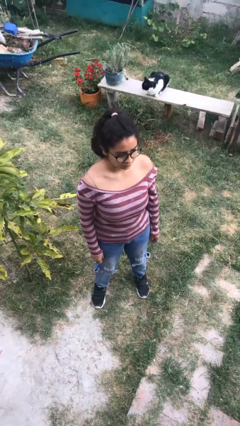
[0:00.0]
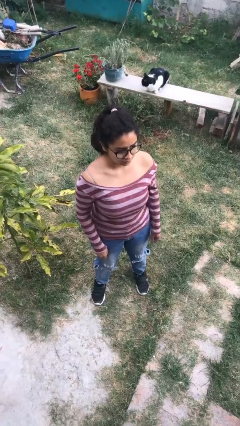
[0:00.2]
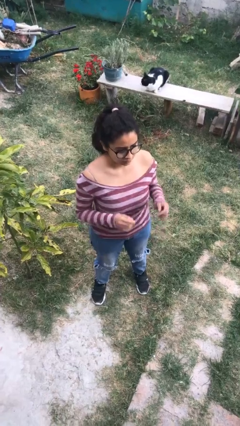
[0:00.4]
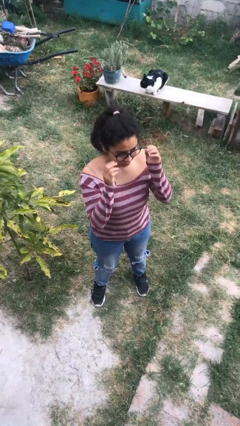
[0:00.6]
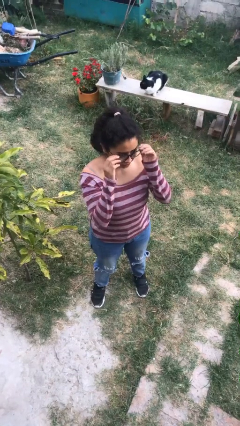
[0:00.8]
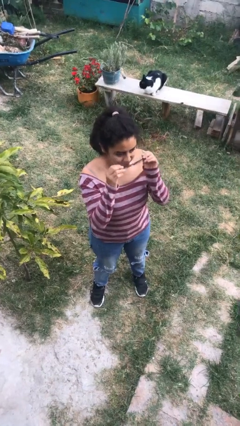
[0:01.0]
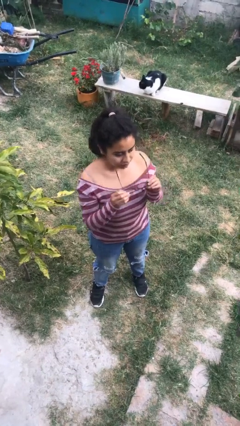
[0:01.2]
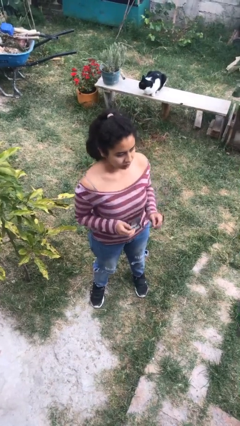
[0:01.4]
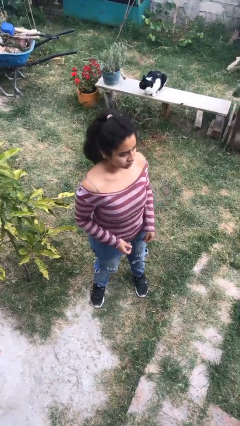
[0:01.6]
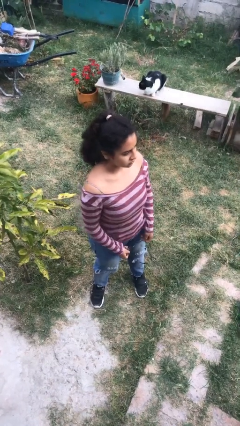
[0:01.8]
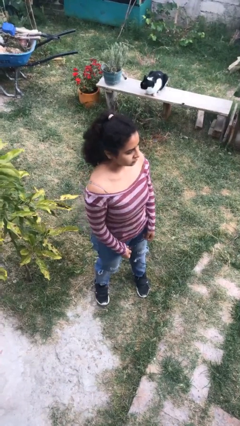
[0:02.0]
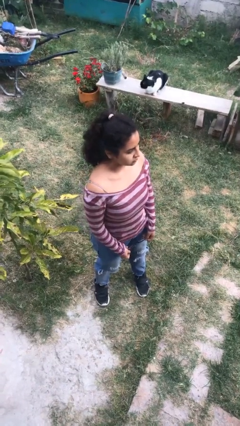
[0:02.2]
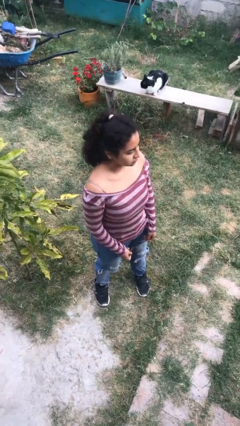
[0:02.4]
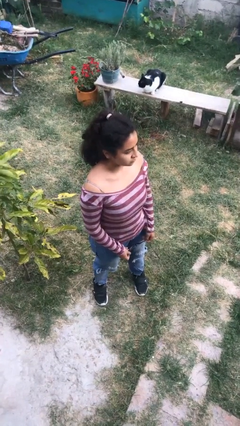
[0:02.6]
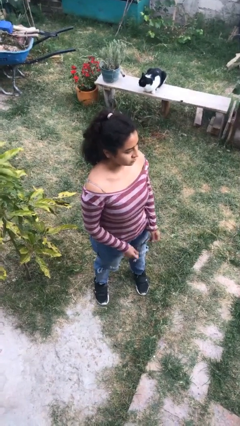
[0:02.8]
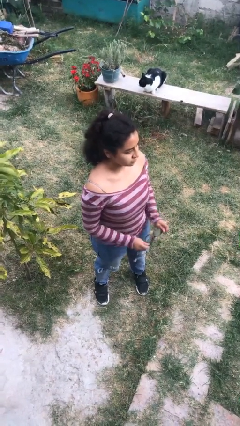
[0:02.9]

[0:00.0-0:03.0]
person takes off glasses

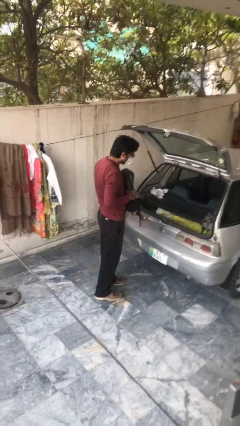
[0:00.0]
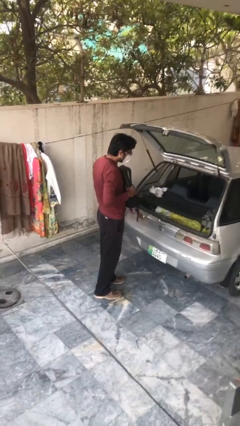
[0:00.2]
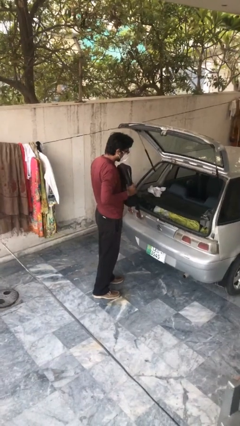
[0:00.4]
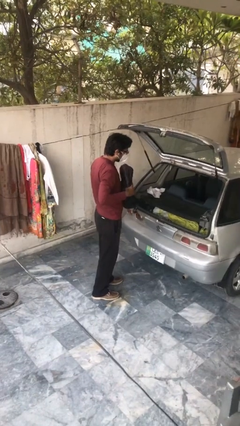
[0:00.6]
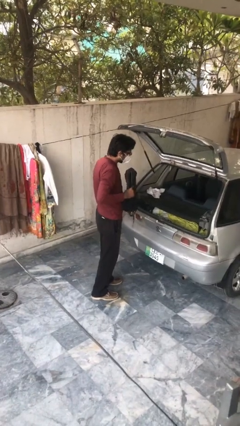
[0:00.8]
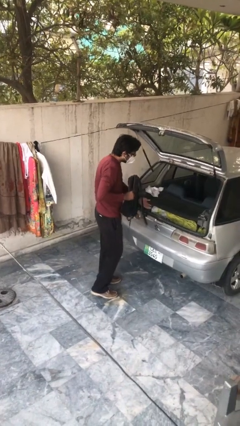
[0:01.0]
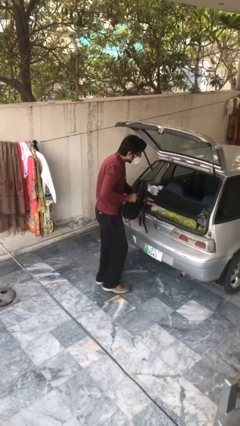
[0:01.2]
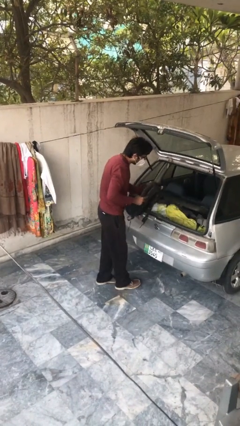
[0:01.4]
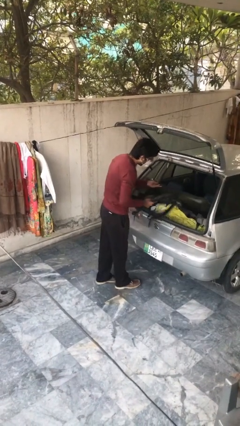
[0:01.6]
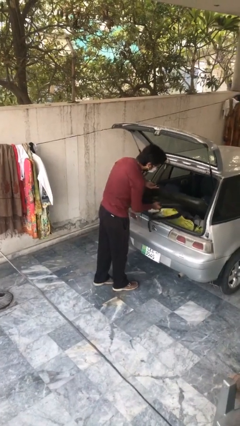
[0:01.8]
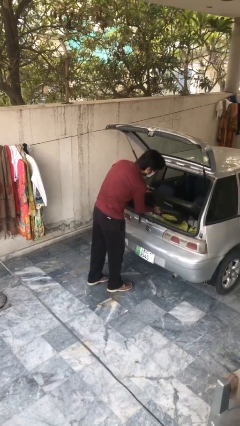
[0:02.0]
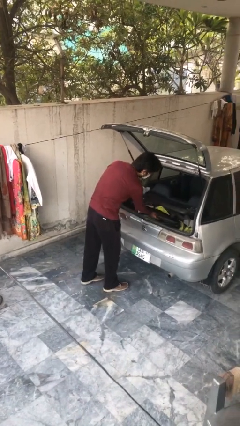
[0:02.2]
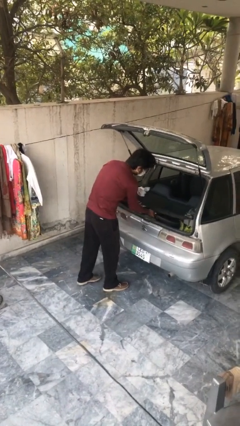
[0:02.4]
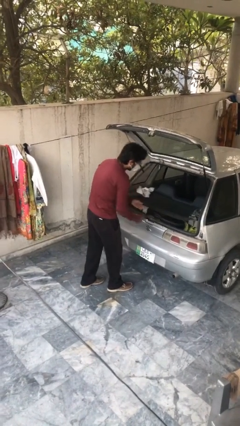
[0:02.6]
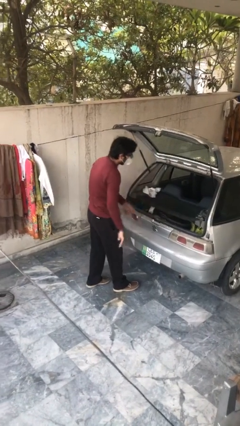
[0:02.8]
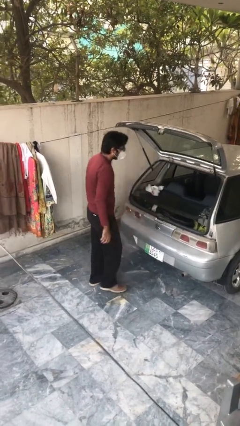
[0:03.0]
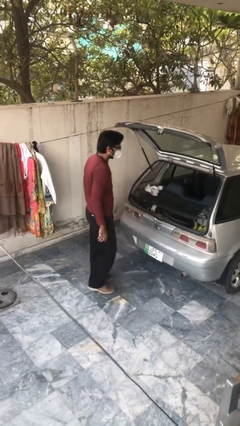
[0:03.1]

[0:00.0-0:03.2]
person loads car

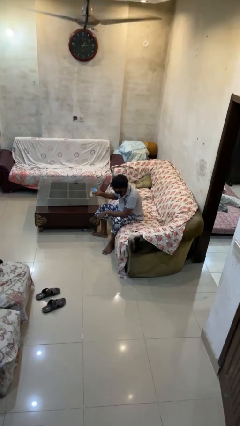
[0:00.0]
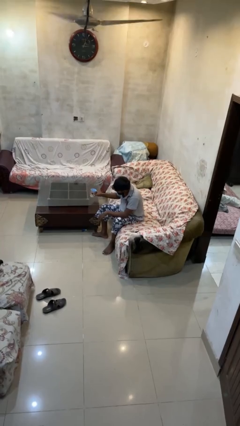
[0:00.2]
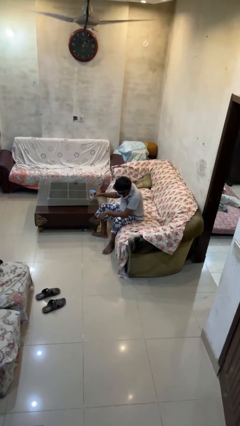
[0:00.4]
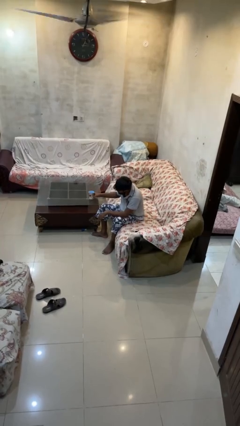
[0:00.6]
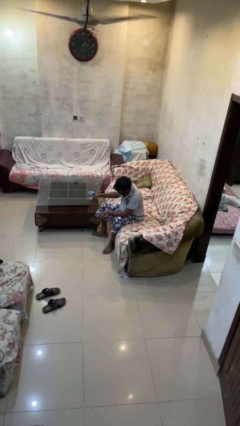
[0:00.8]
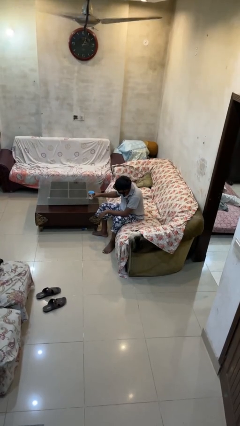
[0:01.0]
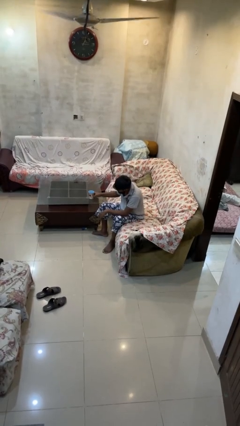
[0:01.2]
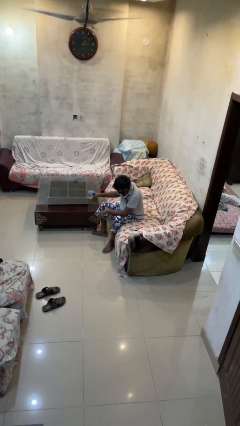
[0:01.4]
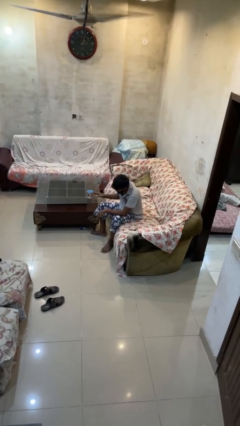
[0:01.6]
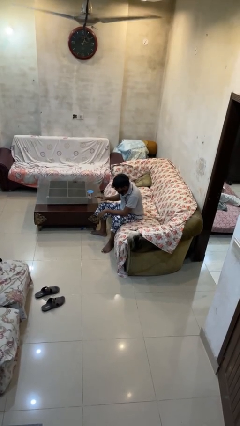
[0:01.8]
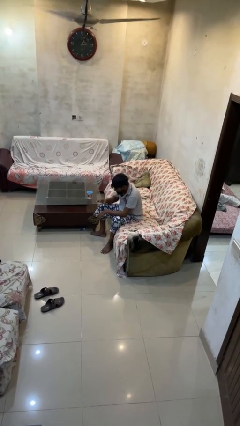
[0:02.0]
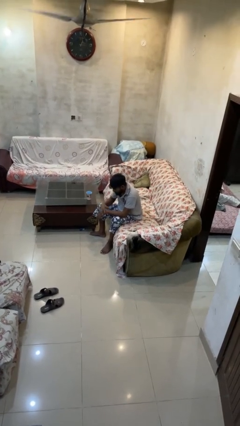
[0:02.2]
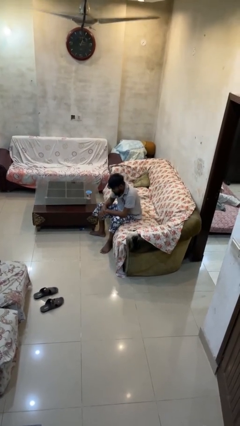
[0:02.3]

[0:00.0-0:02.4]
person puts down object on table

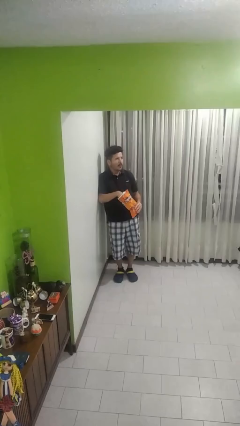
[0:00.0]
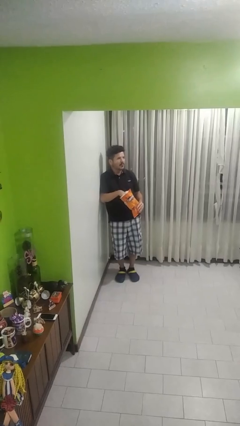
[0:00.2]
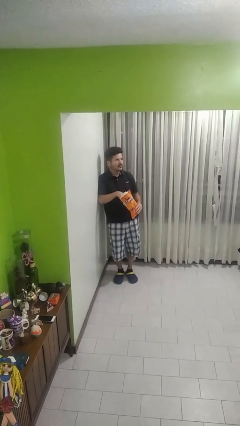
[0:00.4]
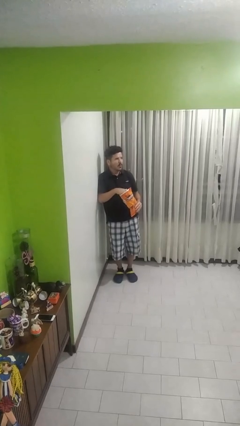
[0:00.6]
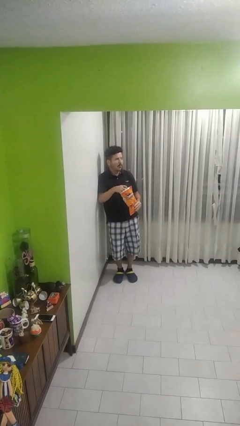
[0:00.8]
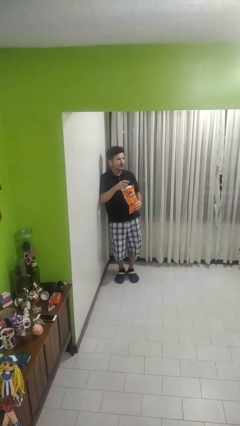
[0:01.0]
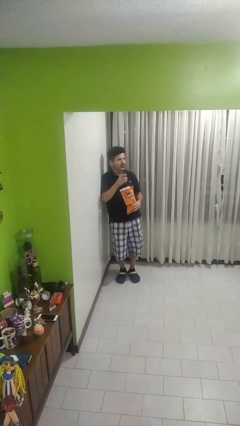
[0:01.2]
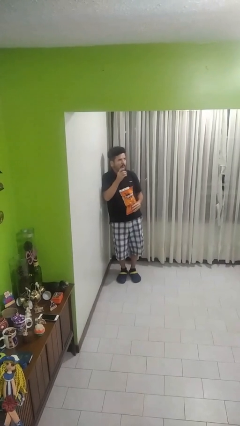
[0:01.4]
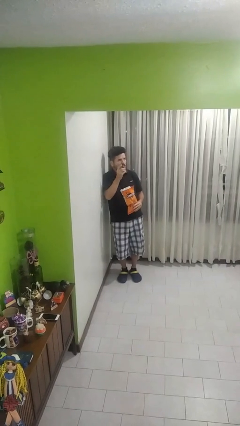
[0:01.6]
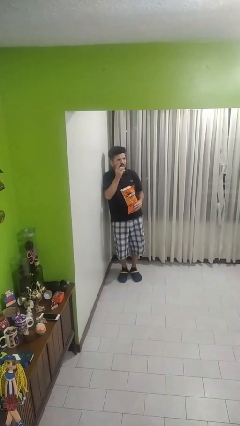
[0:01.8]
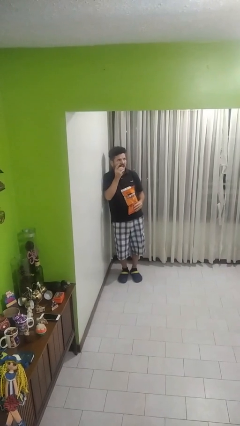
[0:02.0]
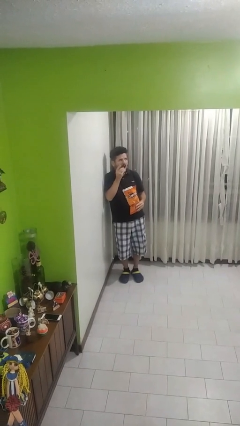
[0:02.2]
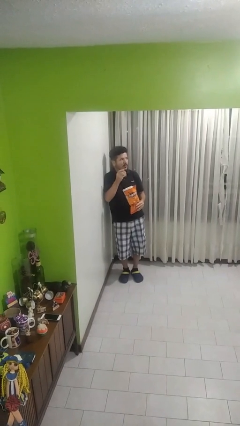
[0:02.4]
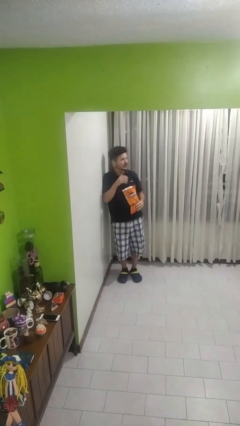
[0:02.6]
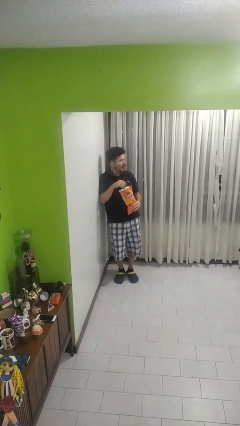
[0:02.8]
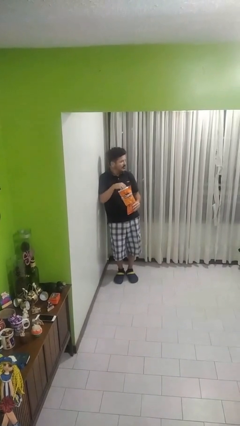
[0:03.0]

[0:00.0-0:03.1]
person eats snack from bag

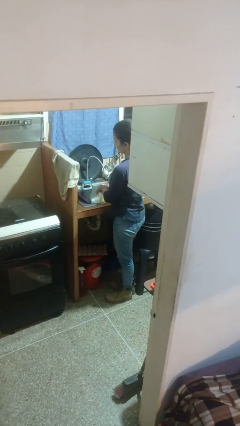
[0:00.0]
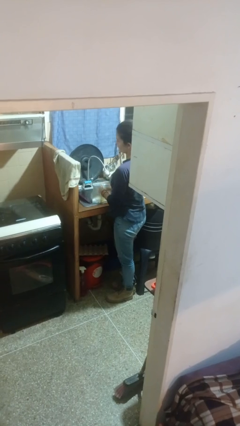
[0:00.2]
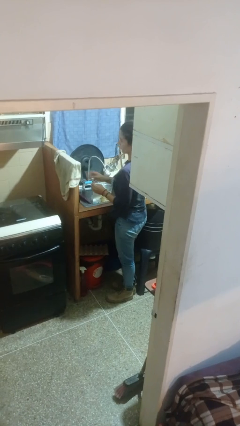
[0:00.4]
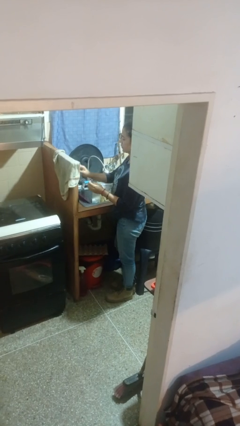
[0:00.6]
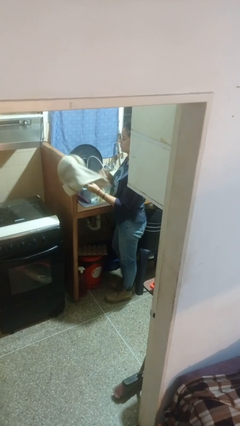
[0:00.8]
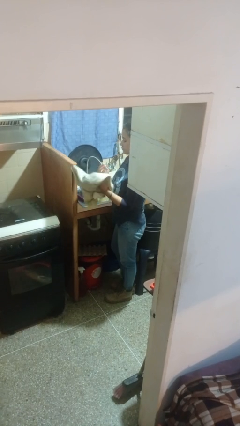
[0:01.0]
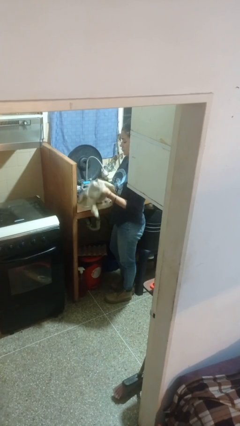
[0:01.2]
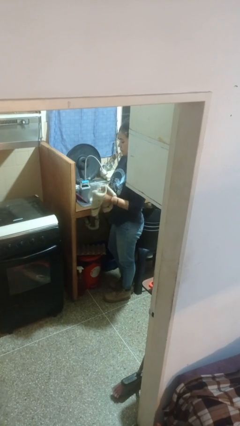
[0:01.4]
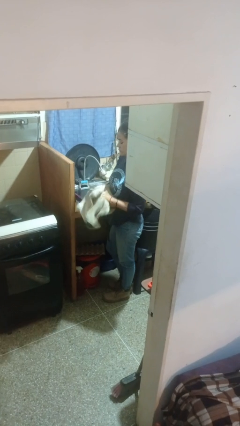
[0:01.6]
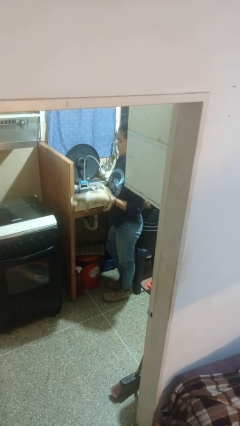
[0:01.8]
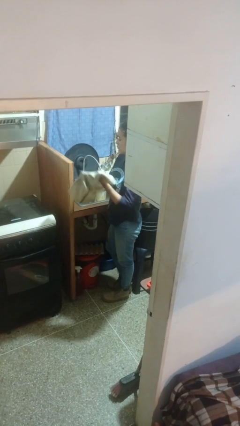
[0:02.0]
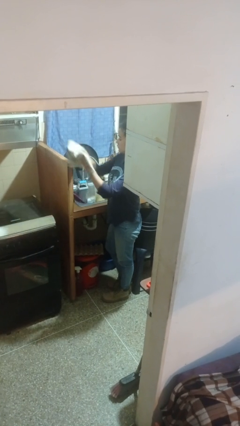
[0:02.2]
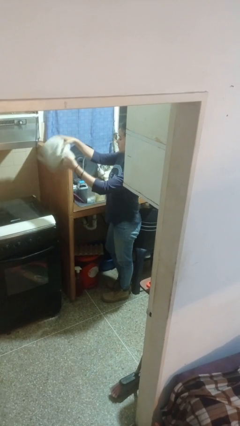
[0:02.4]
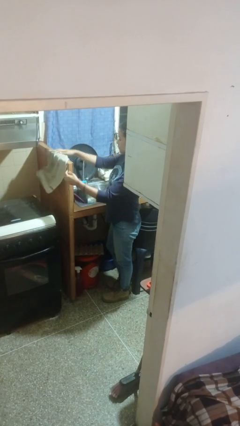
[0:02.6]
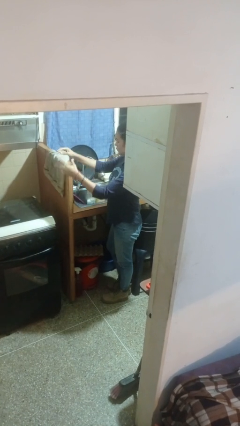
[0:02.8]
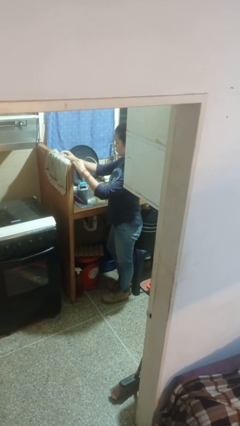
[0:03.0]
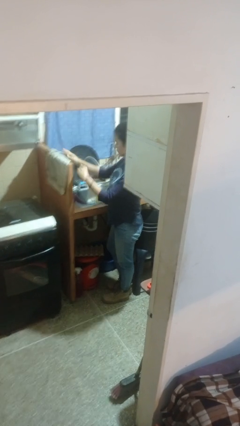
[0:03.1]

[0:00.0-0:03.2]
person dries hands with towel

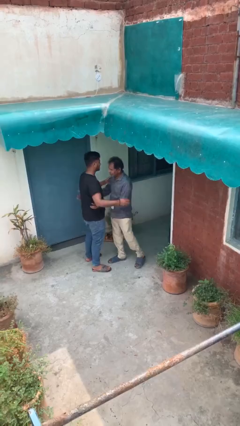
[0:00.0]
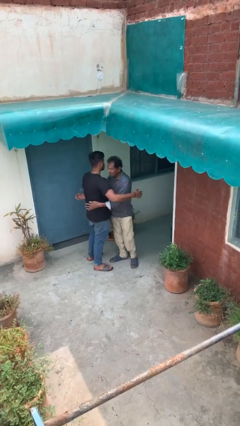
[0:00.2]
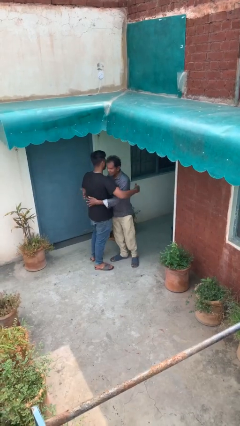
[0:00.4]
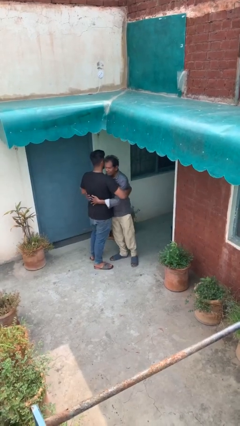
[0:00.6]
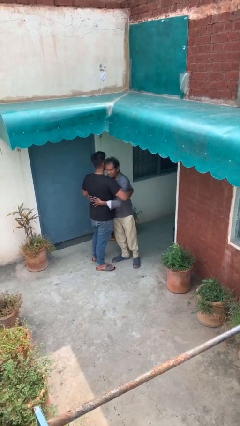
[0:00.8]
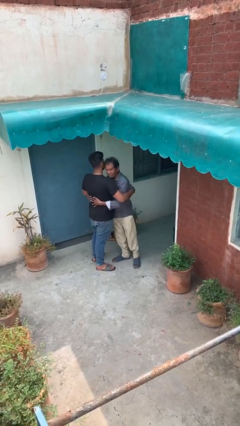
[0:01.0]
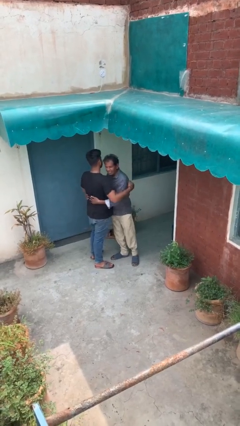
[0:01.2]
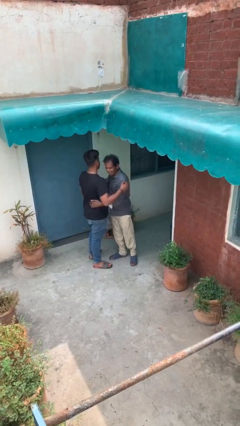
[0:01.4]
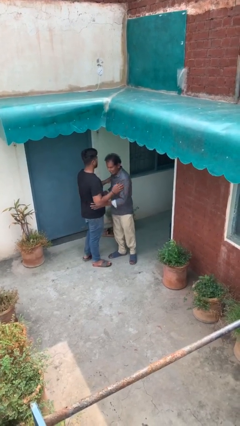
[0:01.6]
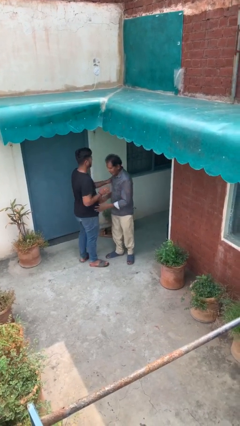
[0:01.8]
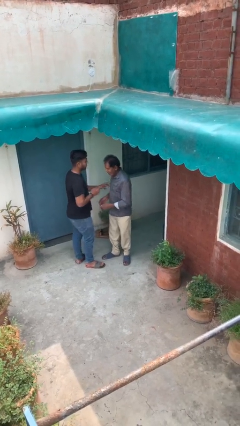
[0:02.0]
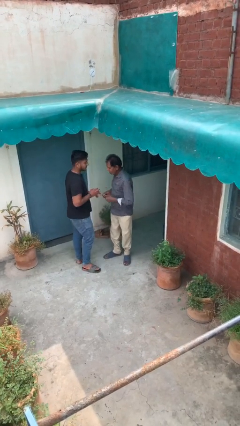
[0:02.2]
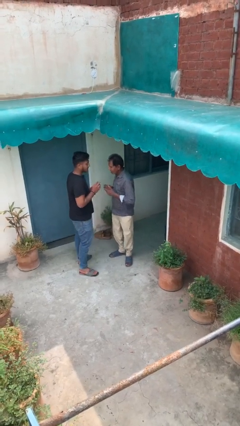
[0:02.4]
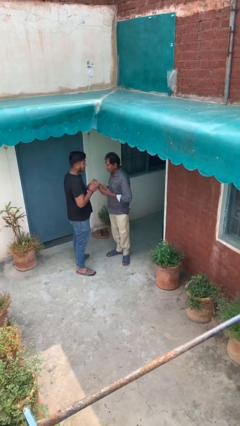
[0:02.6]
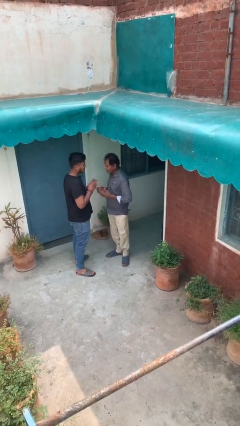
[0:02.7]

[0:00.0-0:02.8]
person embraces person
